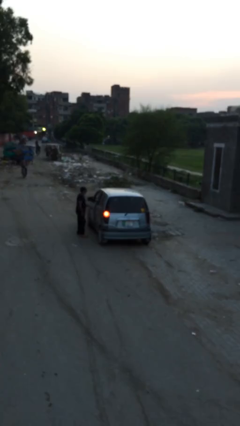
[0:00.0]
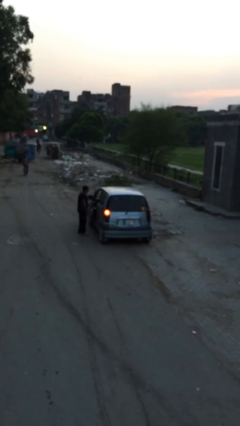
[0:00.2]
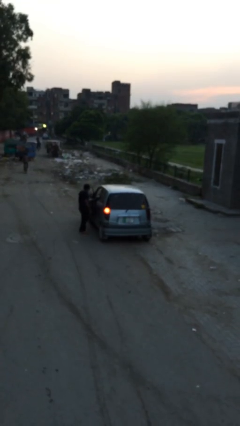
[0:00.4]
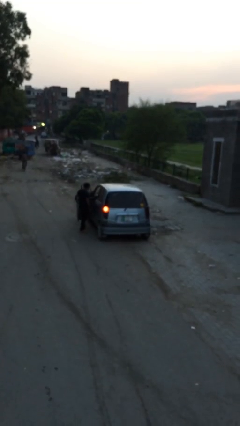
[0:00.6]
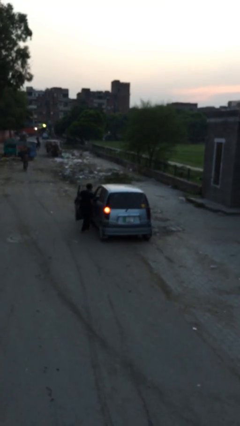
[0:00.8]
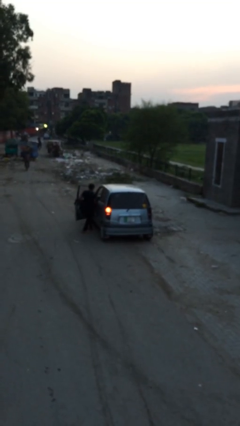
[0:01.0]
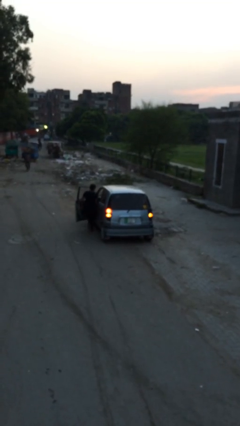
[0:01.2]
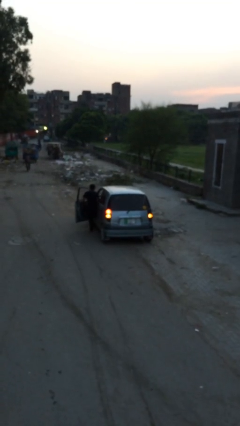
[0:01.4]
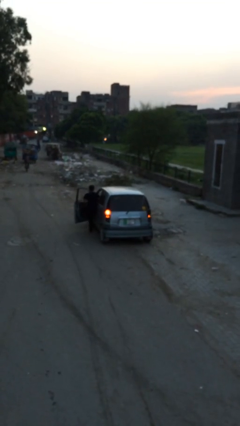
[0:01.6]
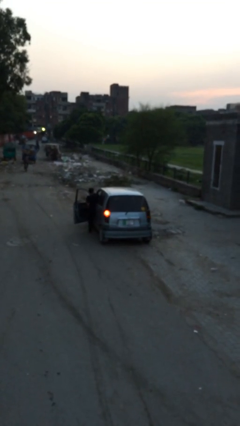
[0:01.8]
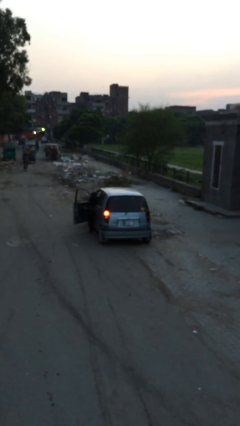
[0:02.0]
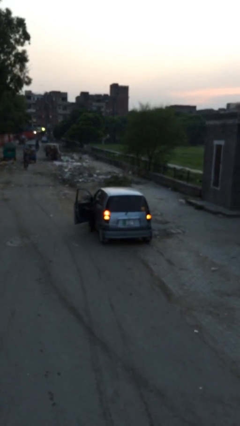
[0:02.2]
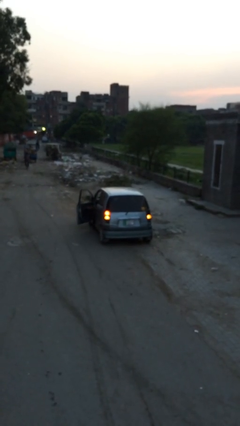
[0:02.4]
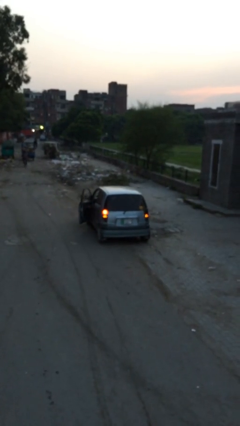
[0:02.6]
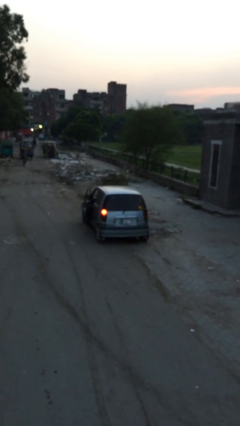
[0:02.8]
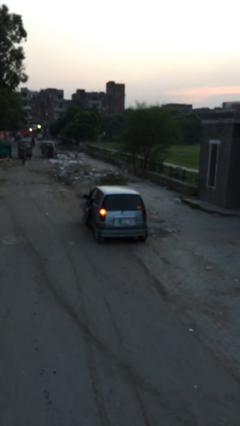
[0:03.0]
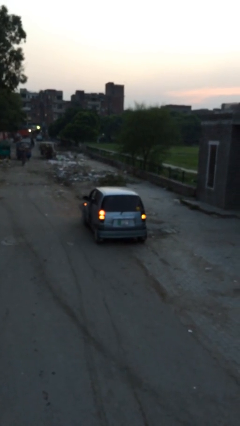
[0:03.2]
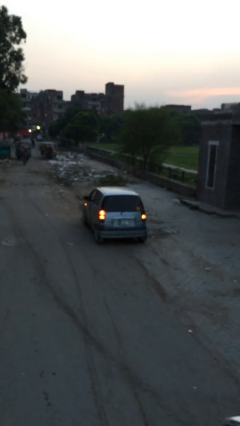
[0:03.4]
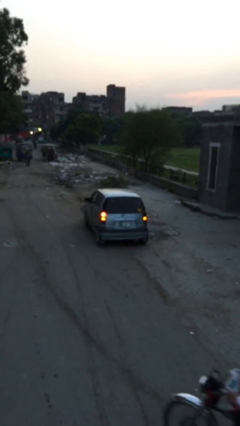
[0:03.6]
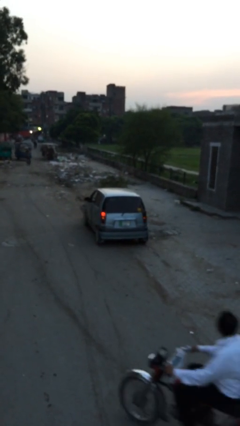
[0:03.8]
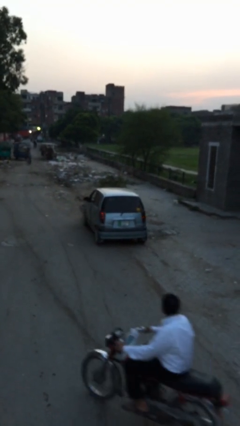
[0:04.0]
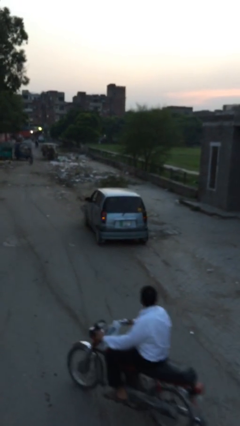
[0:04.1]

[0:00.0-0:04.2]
car picks up person

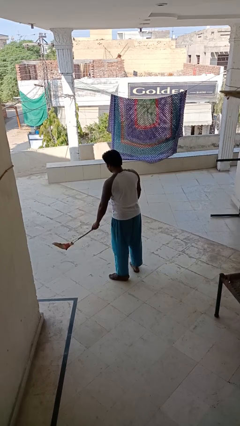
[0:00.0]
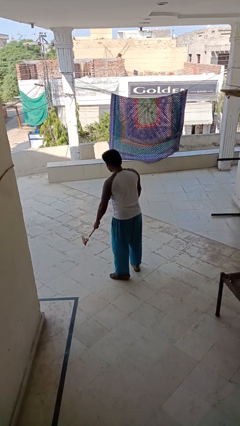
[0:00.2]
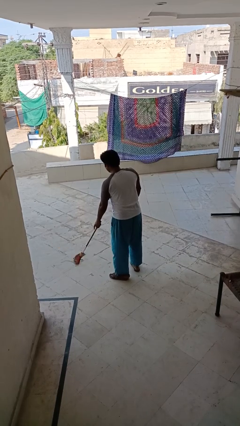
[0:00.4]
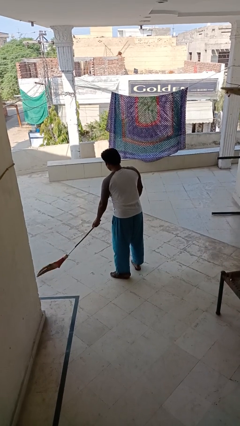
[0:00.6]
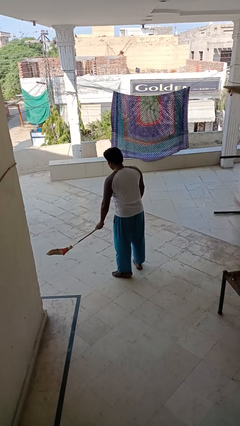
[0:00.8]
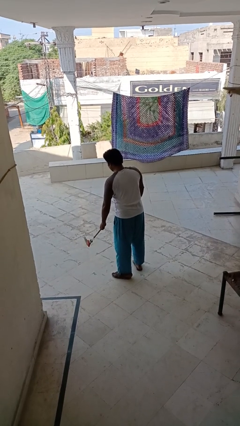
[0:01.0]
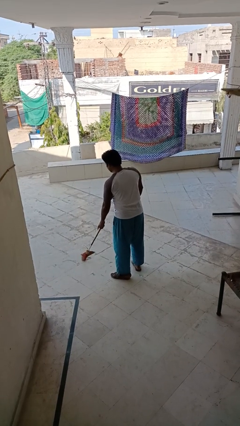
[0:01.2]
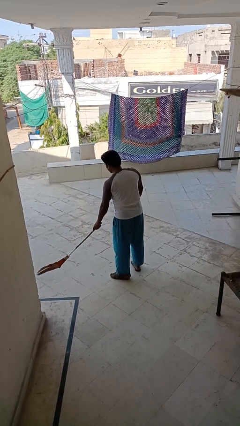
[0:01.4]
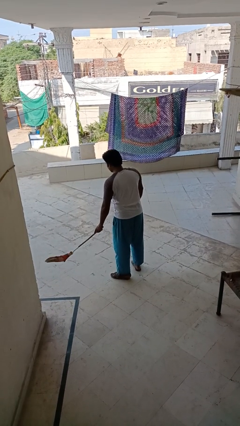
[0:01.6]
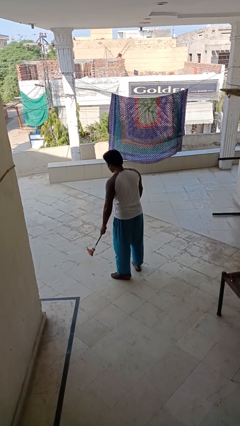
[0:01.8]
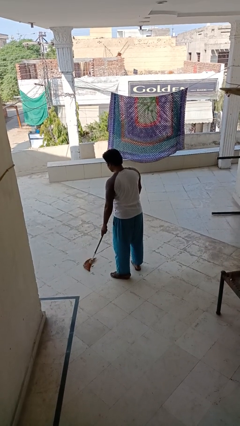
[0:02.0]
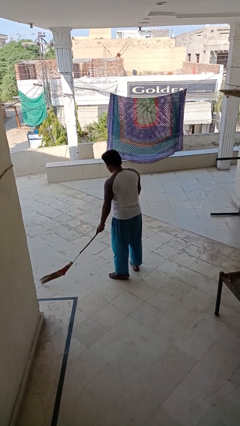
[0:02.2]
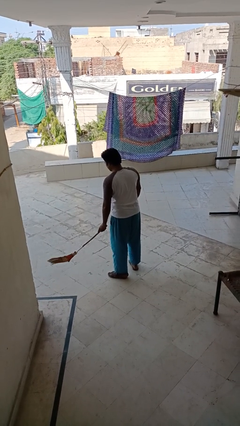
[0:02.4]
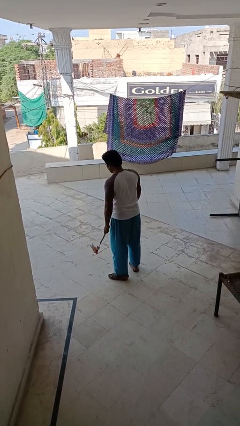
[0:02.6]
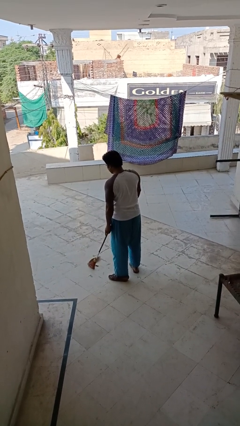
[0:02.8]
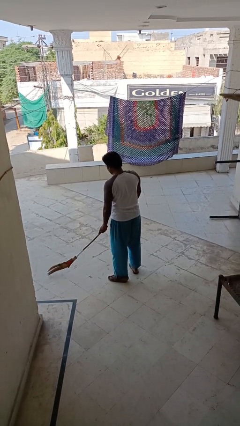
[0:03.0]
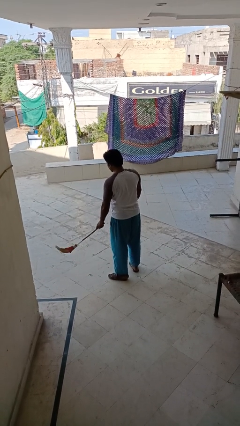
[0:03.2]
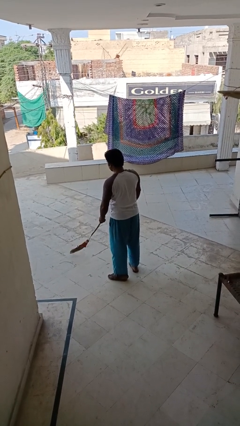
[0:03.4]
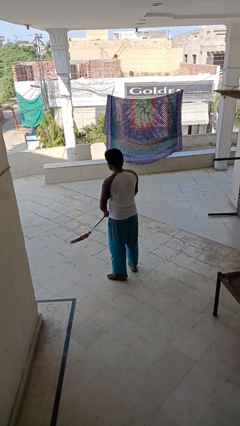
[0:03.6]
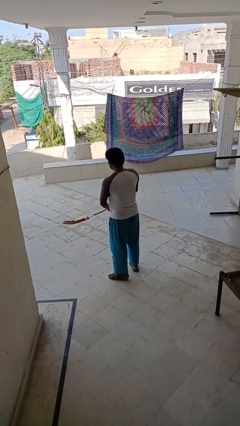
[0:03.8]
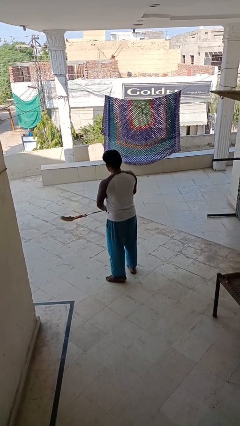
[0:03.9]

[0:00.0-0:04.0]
person sweeps floor

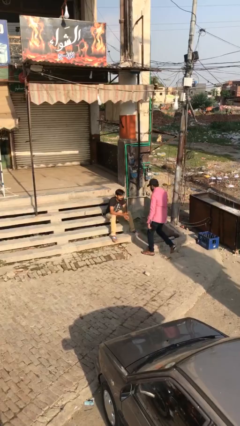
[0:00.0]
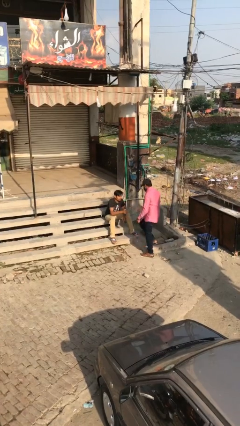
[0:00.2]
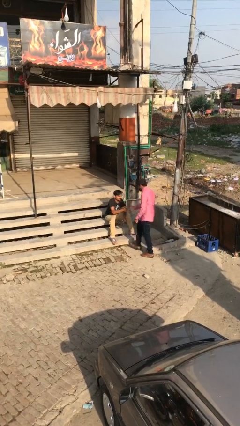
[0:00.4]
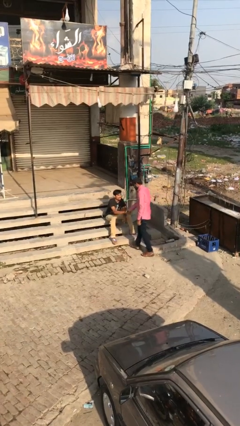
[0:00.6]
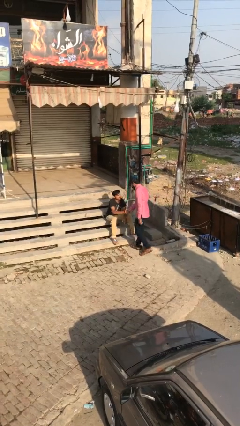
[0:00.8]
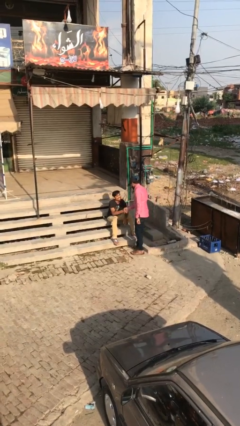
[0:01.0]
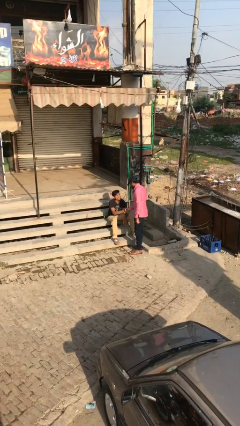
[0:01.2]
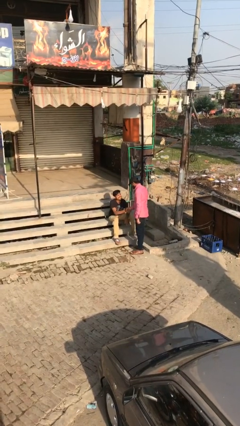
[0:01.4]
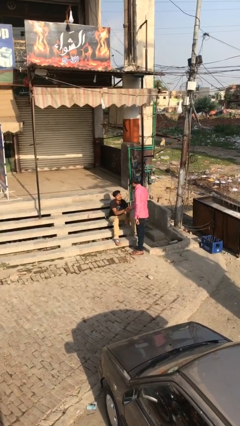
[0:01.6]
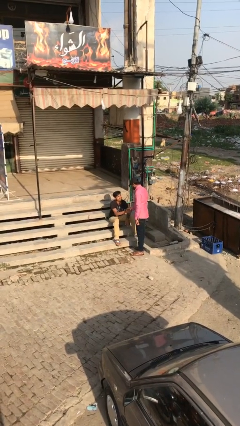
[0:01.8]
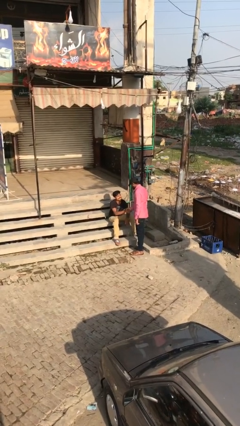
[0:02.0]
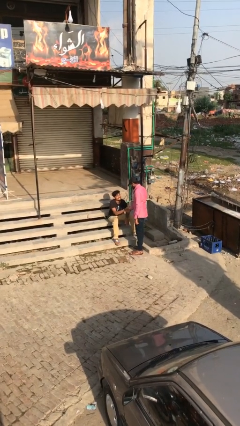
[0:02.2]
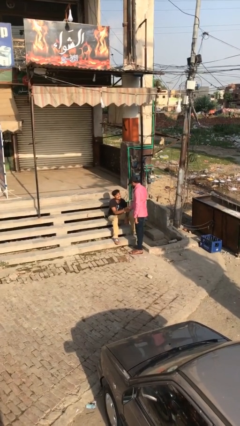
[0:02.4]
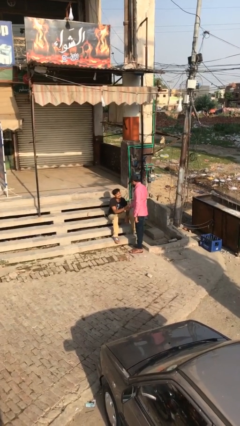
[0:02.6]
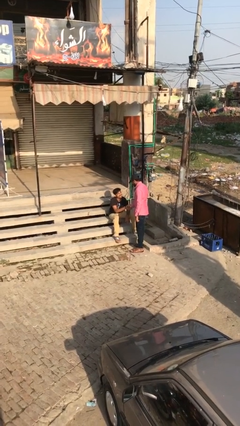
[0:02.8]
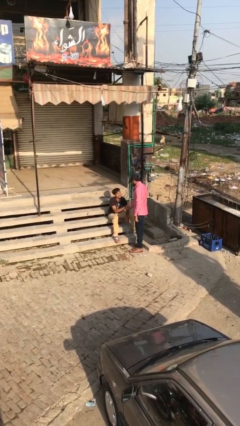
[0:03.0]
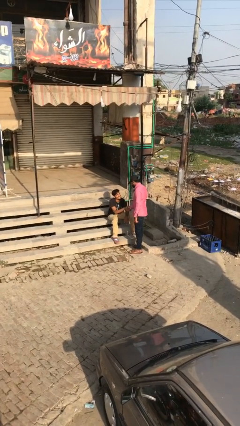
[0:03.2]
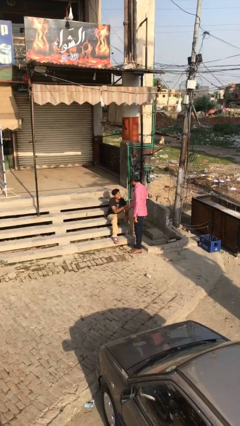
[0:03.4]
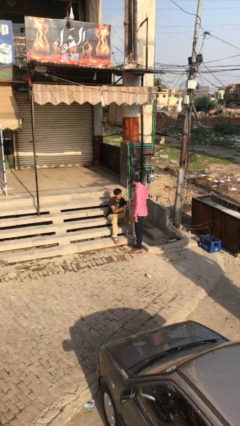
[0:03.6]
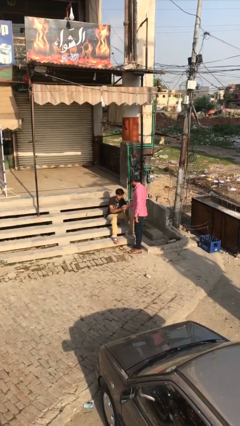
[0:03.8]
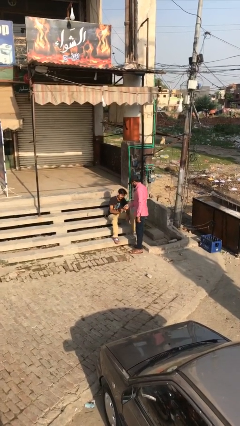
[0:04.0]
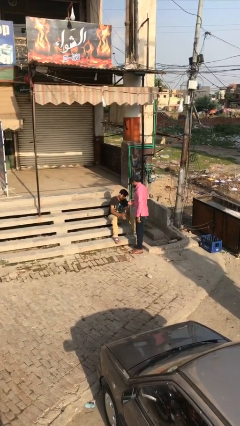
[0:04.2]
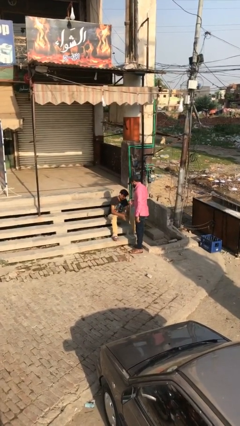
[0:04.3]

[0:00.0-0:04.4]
person shakes hand

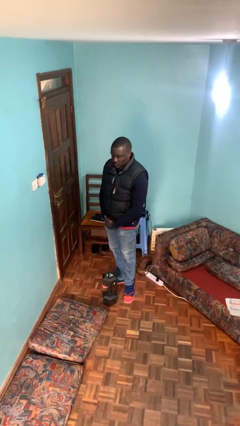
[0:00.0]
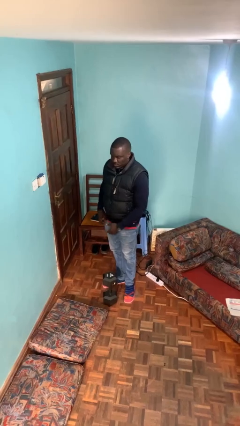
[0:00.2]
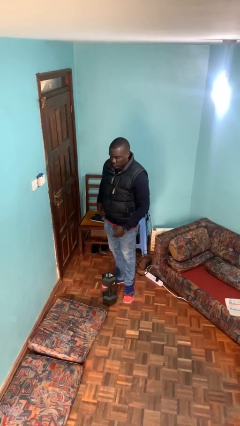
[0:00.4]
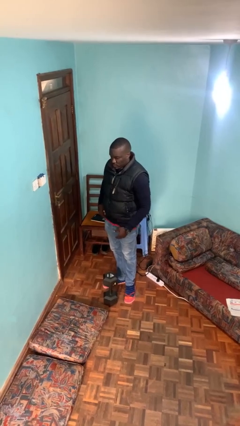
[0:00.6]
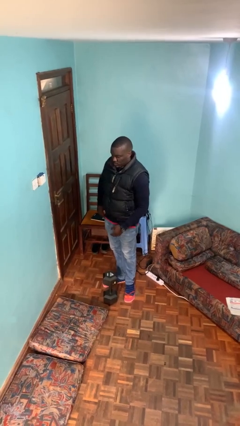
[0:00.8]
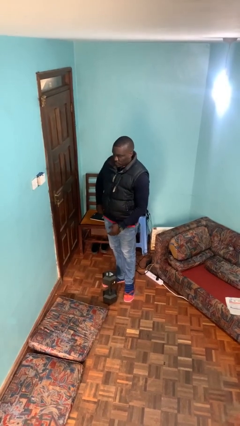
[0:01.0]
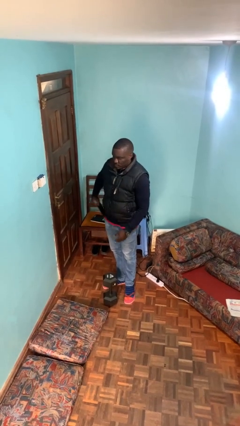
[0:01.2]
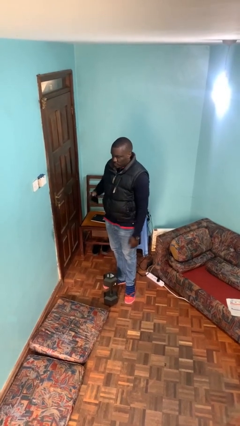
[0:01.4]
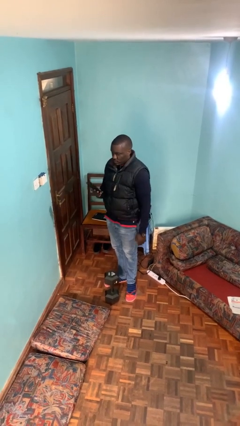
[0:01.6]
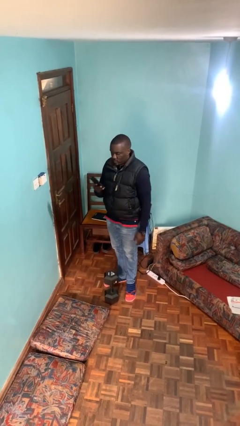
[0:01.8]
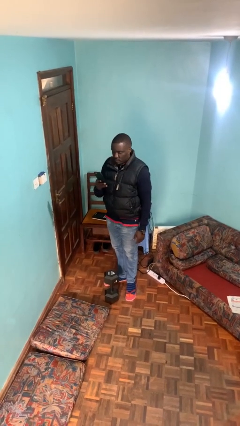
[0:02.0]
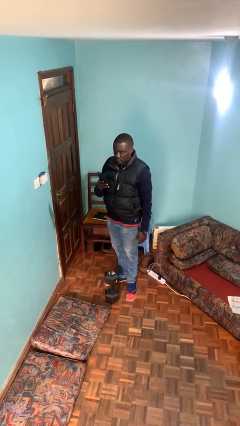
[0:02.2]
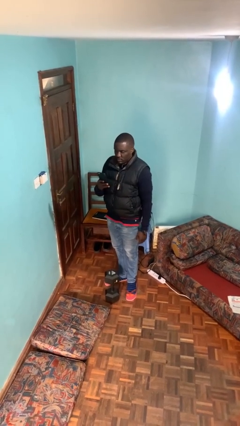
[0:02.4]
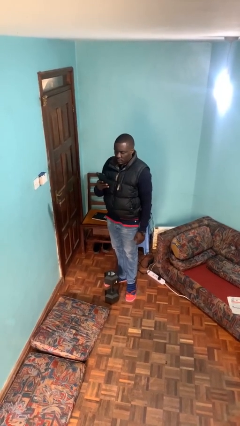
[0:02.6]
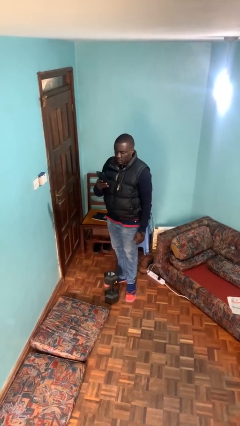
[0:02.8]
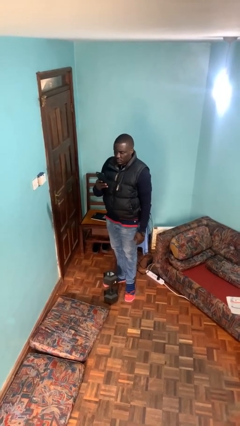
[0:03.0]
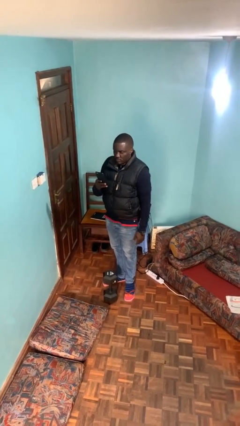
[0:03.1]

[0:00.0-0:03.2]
person takes phone from pocket

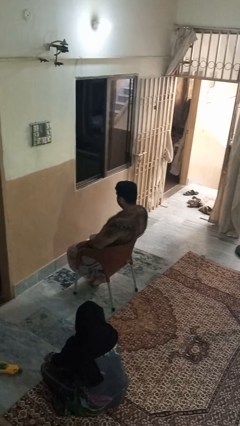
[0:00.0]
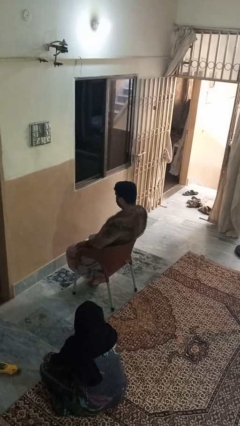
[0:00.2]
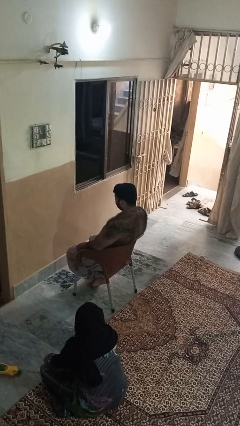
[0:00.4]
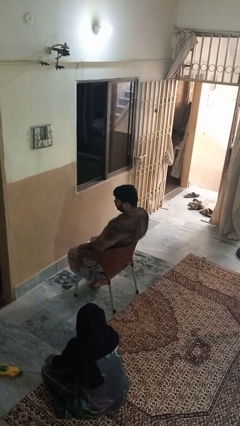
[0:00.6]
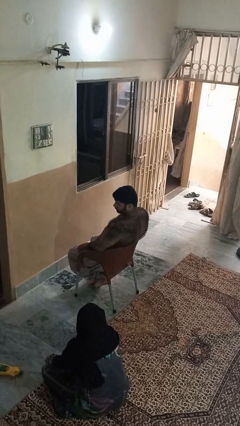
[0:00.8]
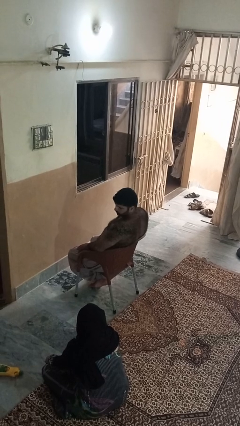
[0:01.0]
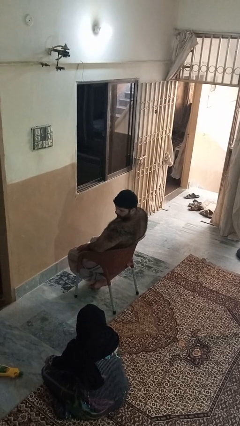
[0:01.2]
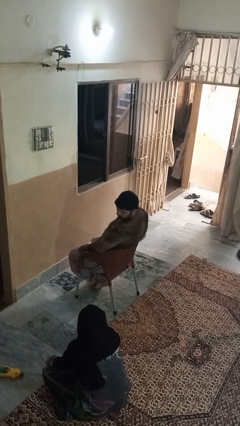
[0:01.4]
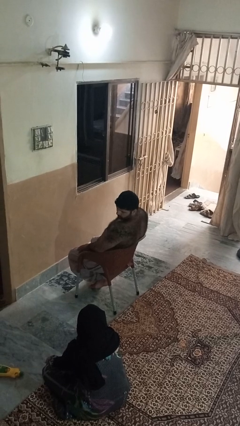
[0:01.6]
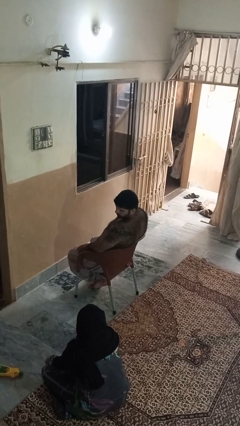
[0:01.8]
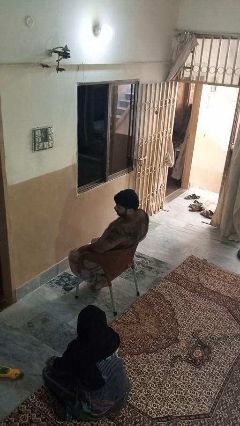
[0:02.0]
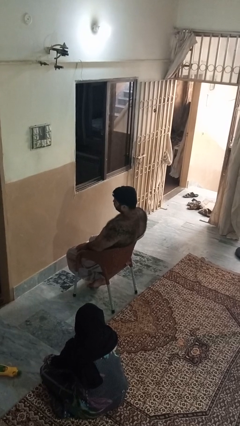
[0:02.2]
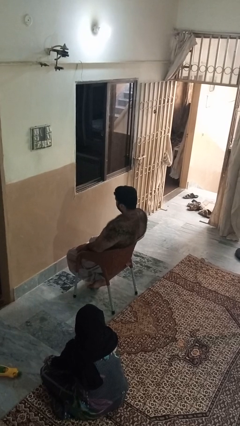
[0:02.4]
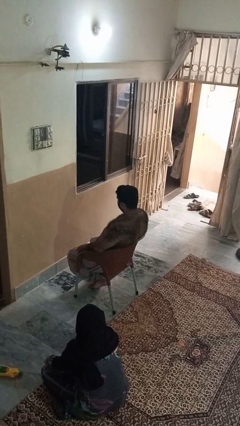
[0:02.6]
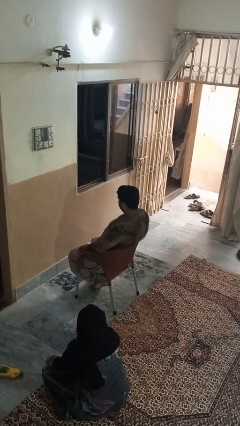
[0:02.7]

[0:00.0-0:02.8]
person looks over shoulder
